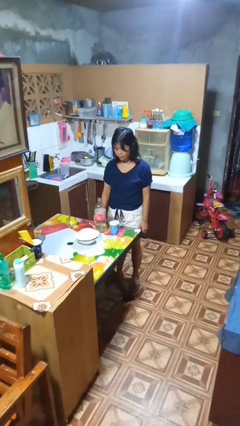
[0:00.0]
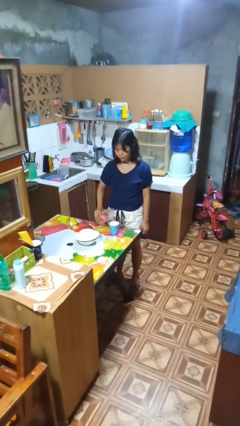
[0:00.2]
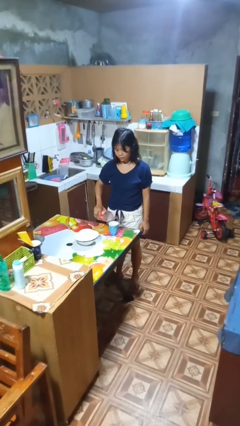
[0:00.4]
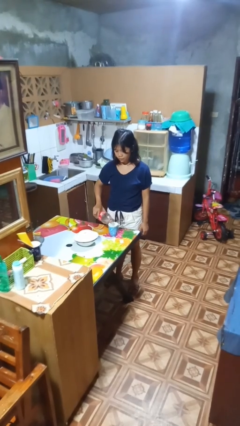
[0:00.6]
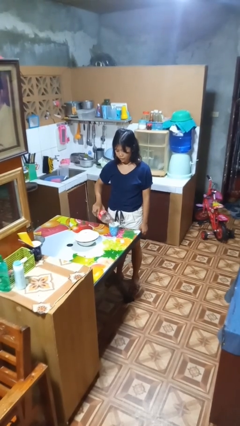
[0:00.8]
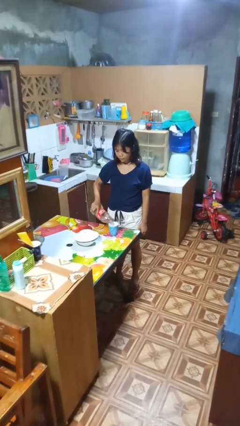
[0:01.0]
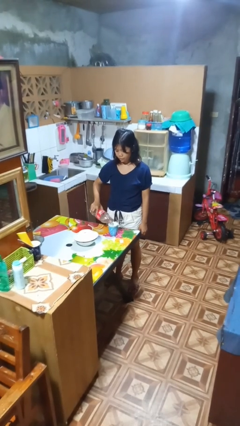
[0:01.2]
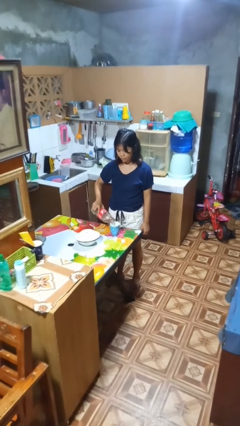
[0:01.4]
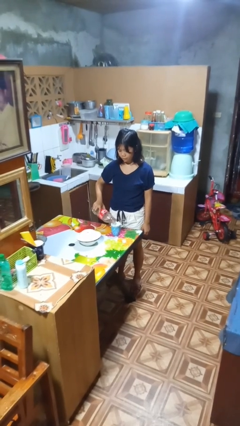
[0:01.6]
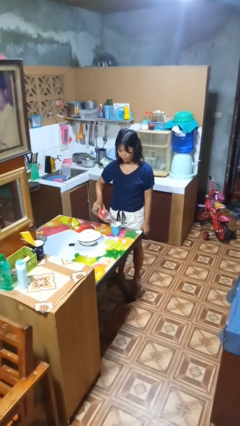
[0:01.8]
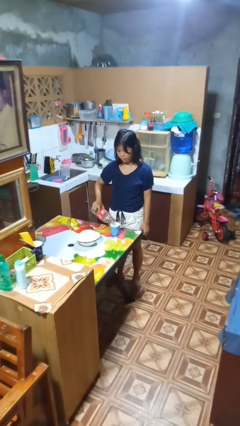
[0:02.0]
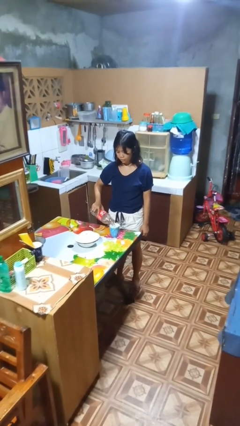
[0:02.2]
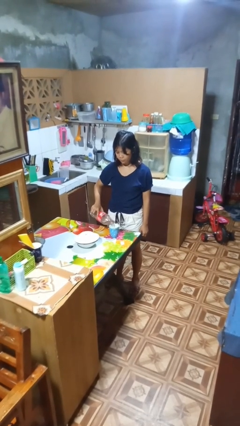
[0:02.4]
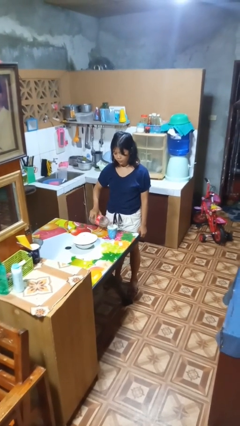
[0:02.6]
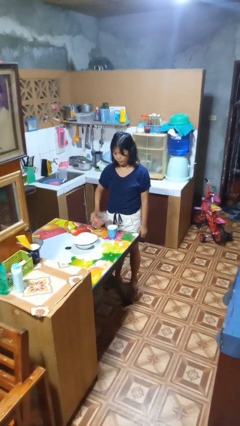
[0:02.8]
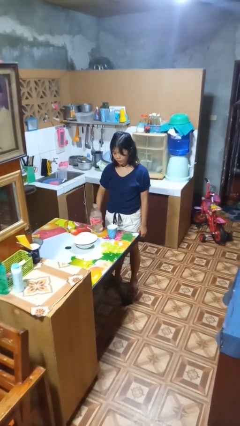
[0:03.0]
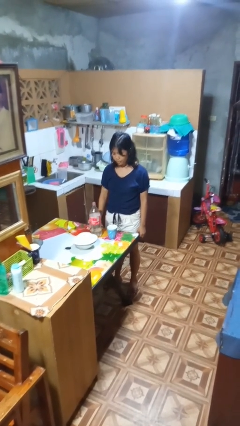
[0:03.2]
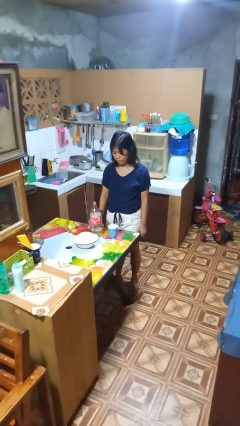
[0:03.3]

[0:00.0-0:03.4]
person pours liquid into cup

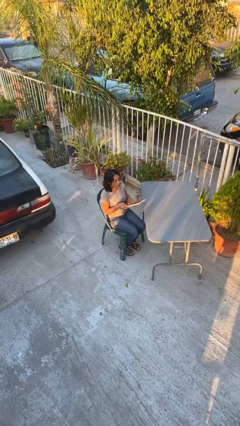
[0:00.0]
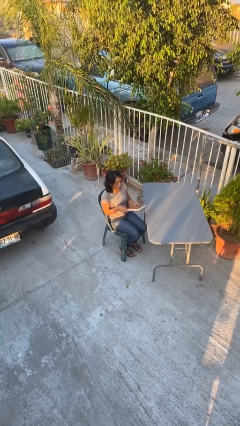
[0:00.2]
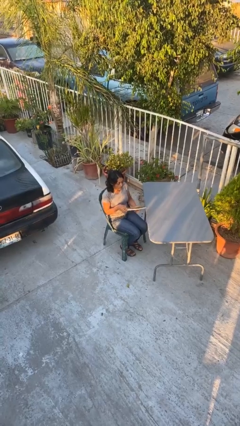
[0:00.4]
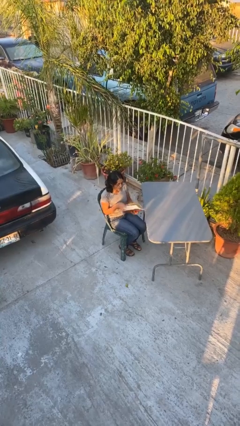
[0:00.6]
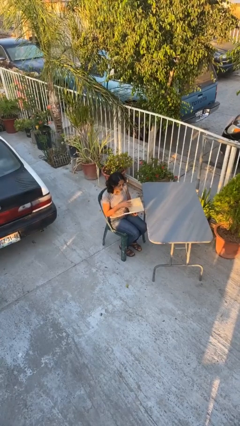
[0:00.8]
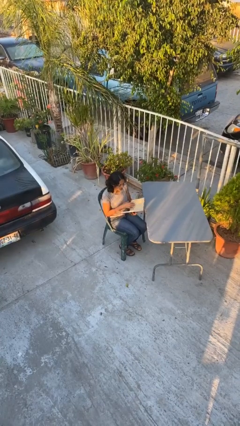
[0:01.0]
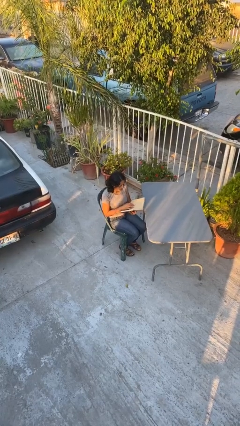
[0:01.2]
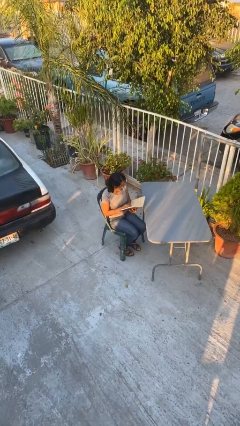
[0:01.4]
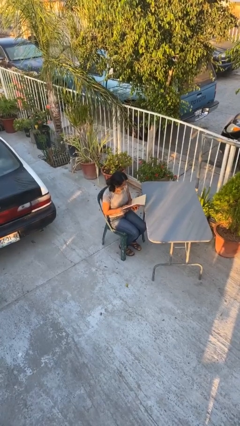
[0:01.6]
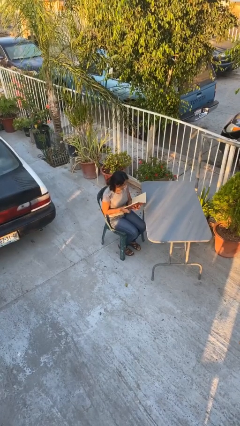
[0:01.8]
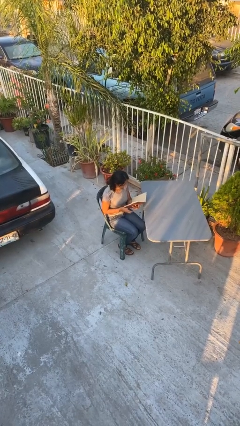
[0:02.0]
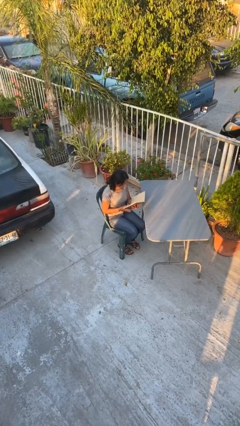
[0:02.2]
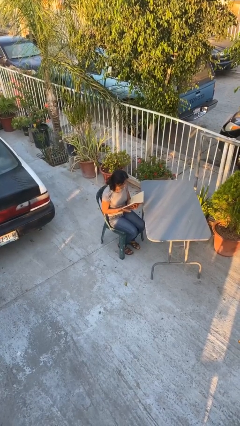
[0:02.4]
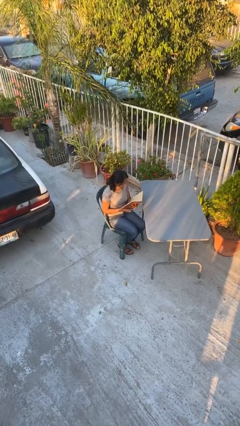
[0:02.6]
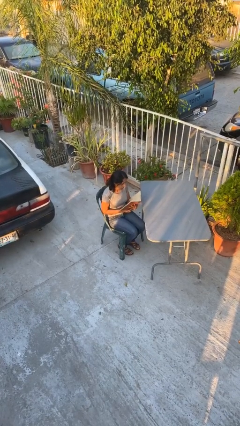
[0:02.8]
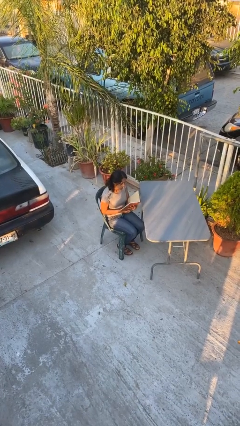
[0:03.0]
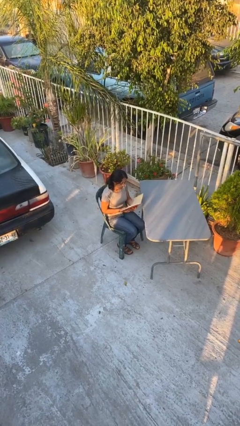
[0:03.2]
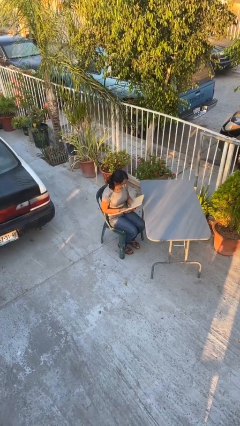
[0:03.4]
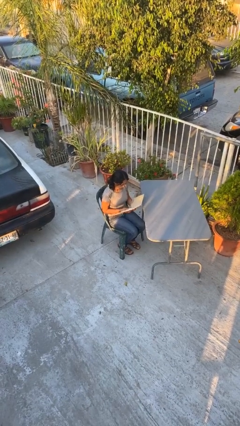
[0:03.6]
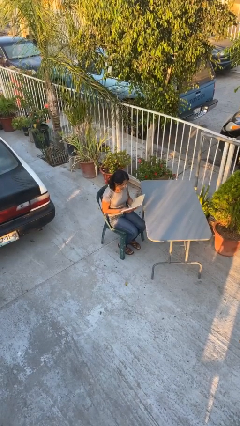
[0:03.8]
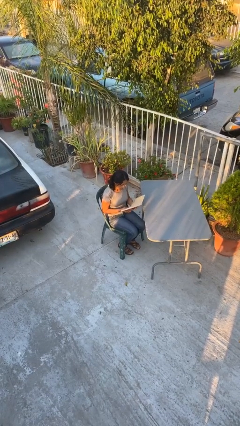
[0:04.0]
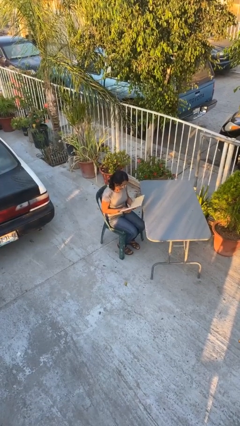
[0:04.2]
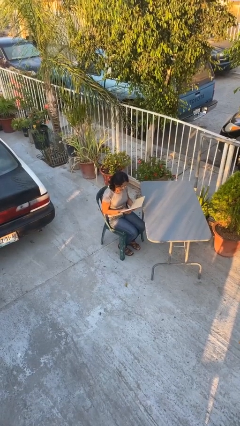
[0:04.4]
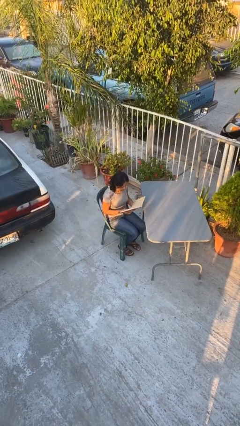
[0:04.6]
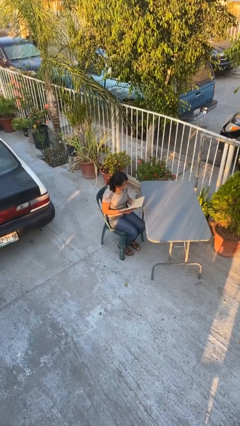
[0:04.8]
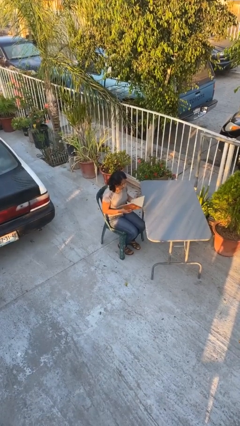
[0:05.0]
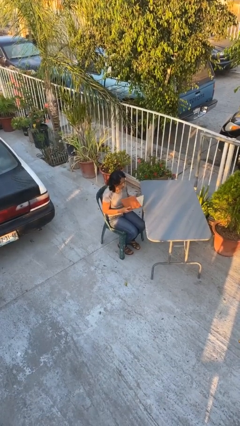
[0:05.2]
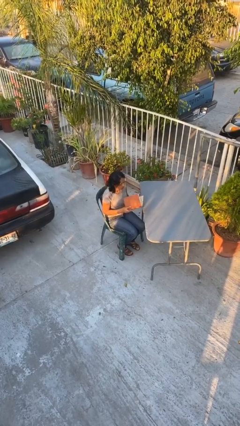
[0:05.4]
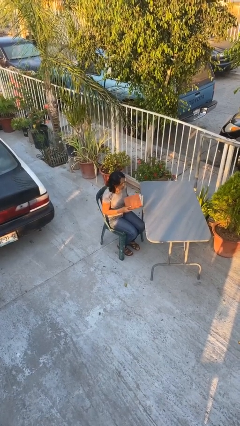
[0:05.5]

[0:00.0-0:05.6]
person reads document

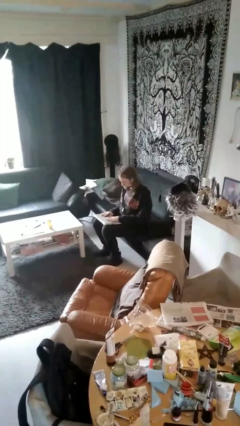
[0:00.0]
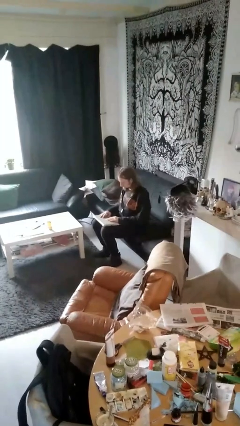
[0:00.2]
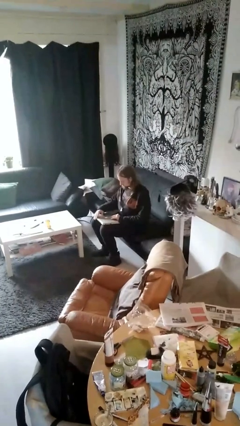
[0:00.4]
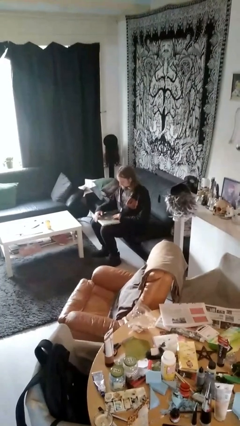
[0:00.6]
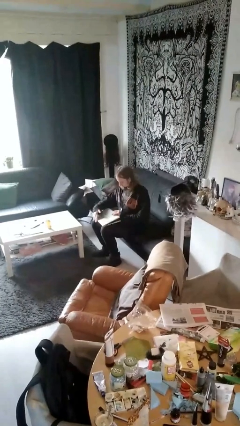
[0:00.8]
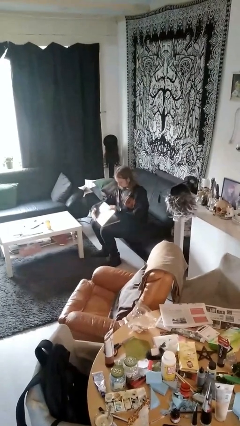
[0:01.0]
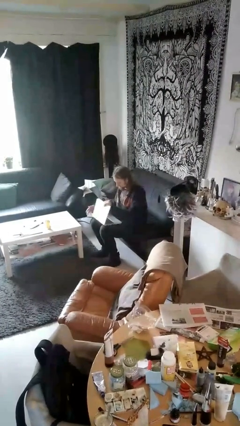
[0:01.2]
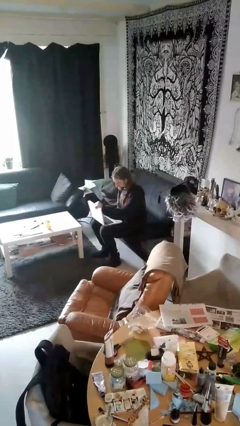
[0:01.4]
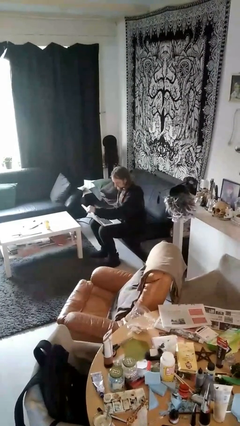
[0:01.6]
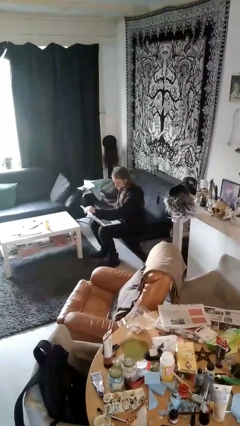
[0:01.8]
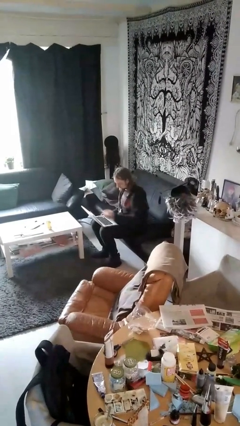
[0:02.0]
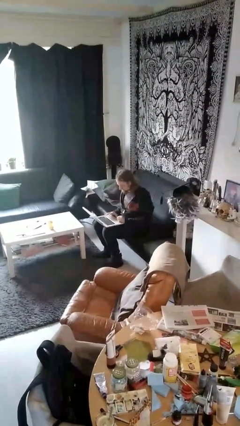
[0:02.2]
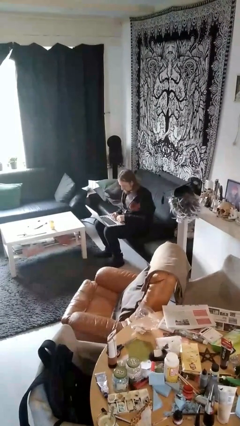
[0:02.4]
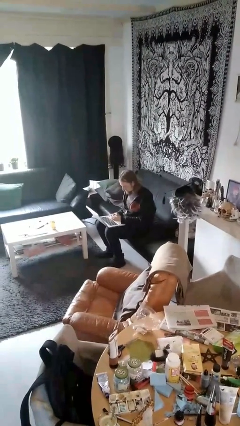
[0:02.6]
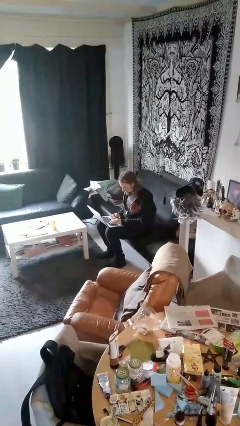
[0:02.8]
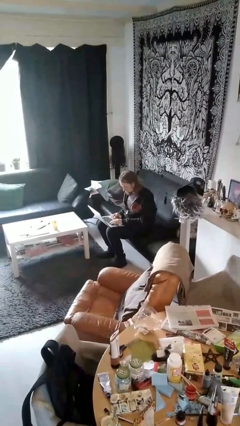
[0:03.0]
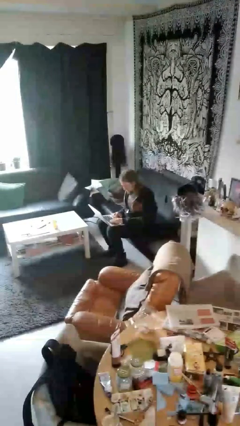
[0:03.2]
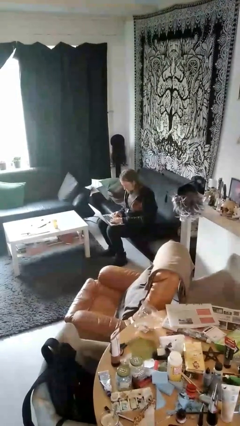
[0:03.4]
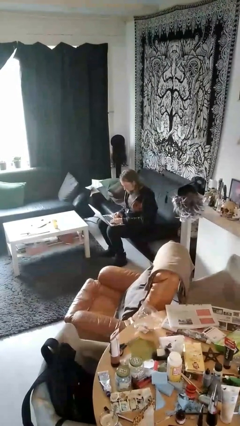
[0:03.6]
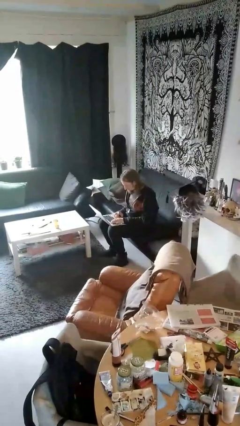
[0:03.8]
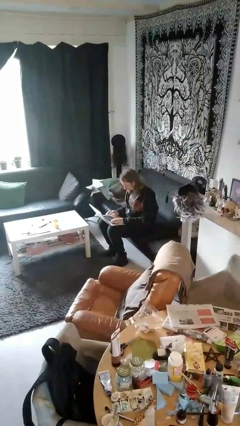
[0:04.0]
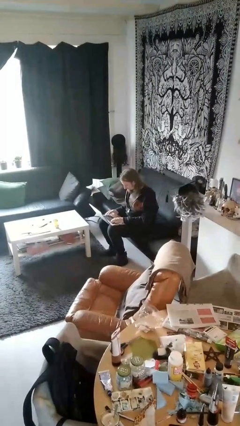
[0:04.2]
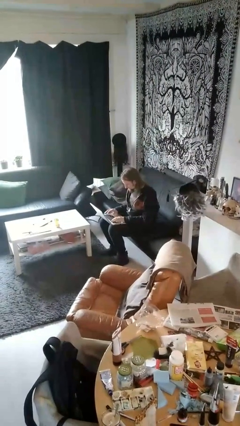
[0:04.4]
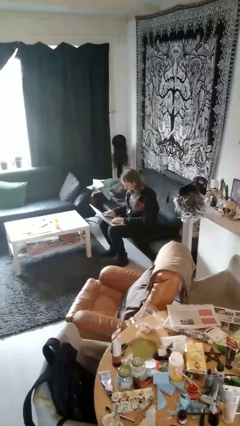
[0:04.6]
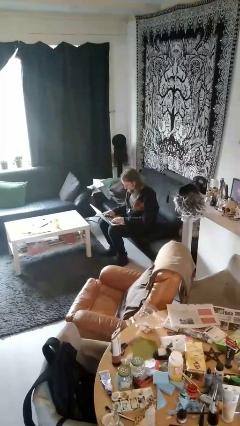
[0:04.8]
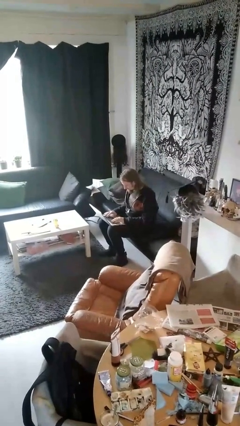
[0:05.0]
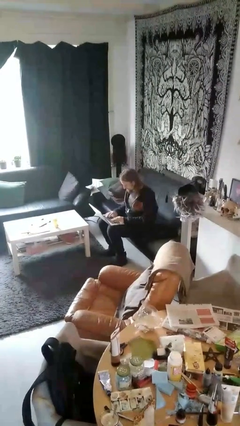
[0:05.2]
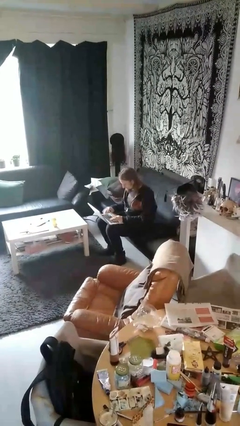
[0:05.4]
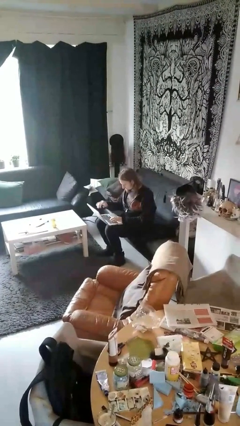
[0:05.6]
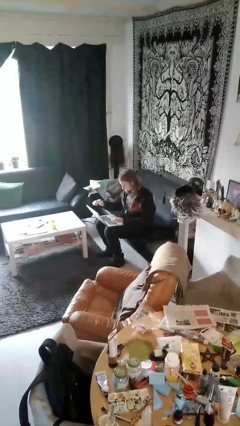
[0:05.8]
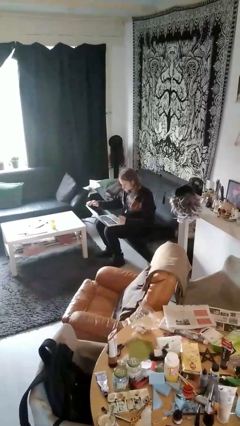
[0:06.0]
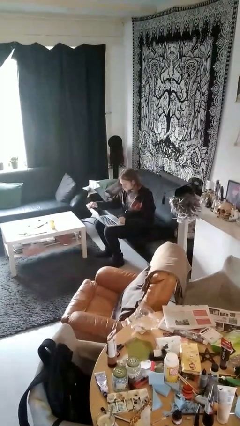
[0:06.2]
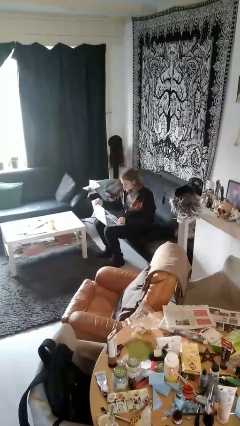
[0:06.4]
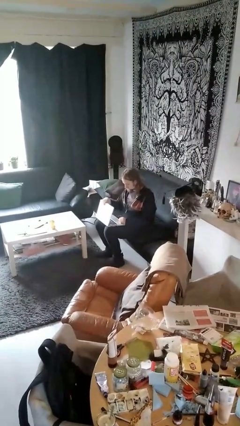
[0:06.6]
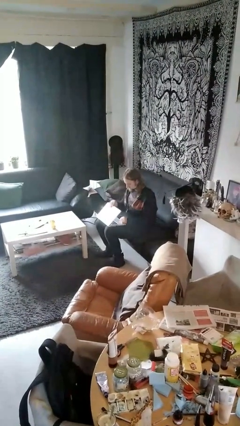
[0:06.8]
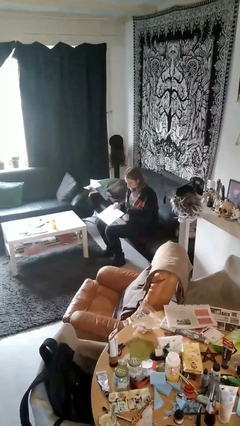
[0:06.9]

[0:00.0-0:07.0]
person interacts with laptop

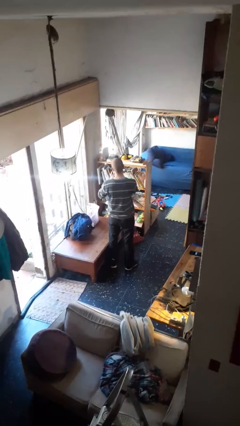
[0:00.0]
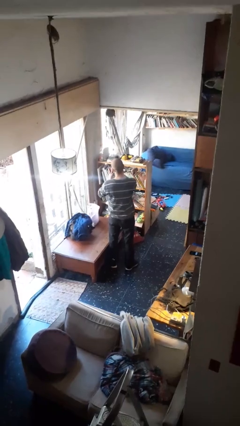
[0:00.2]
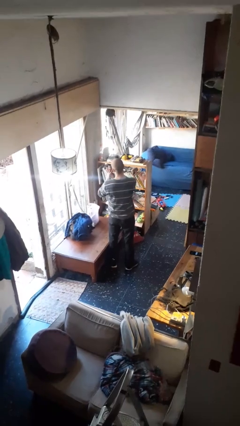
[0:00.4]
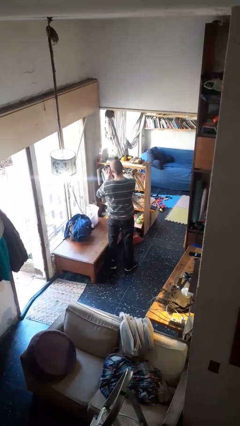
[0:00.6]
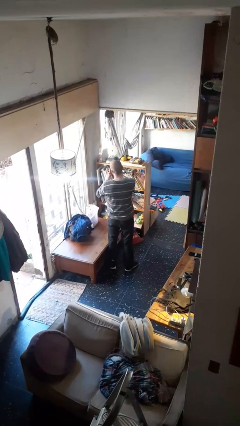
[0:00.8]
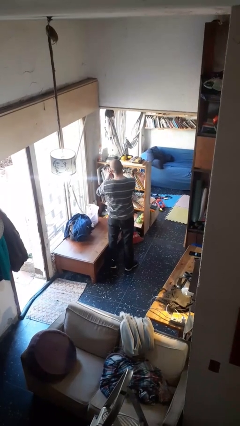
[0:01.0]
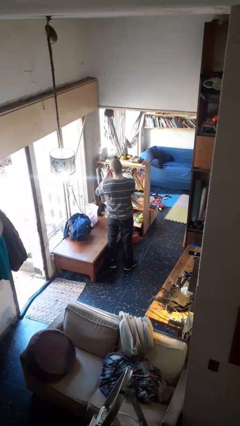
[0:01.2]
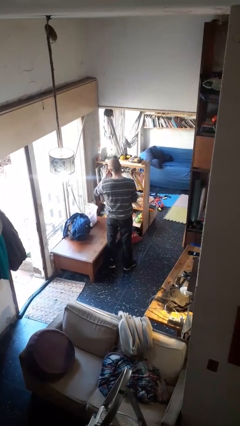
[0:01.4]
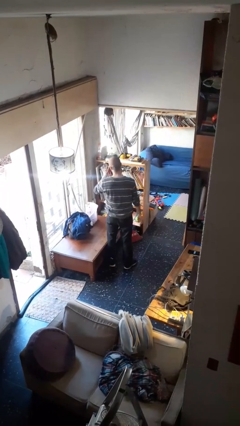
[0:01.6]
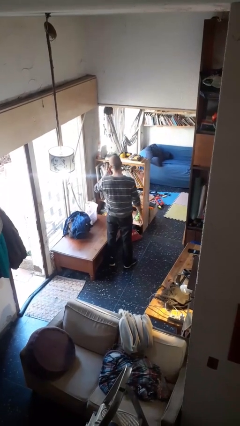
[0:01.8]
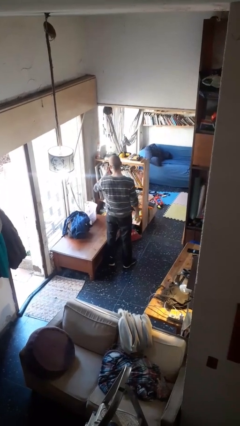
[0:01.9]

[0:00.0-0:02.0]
person puts on ring
